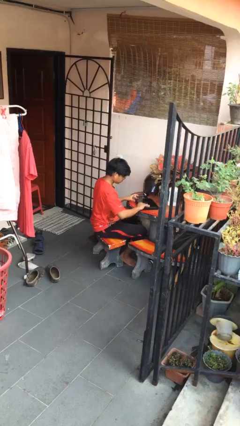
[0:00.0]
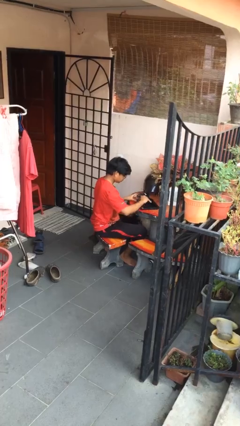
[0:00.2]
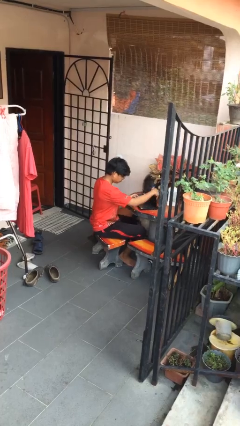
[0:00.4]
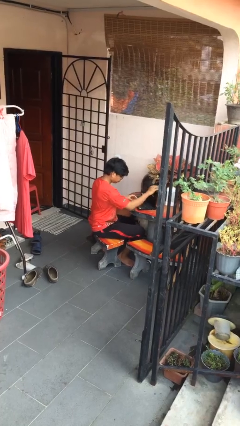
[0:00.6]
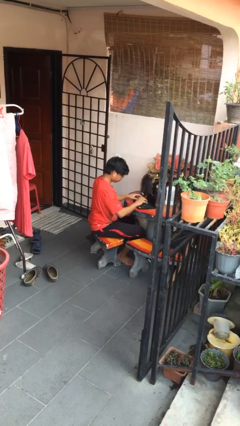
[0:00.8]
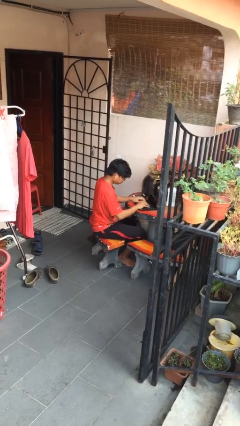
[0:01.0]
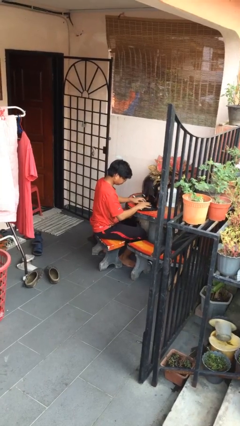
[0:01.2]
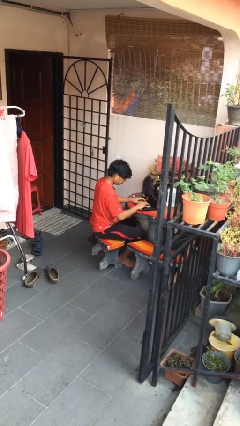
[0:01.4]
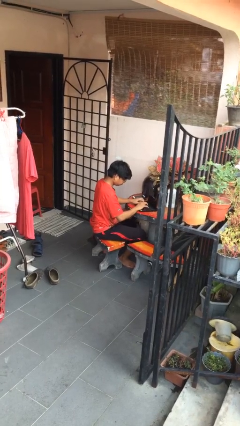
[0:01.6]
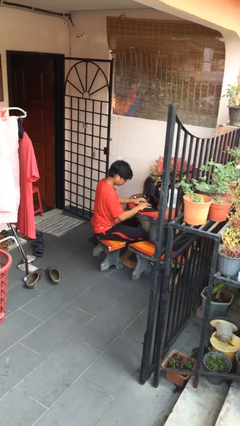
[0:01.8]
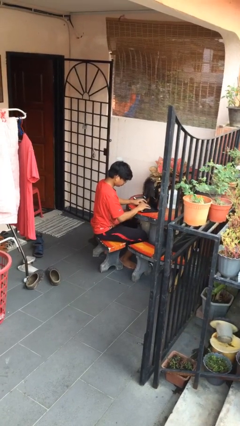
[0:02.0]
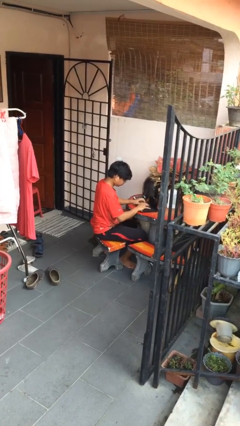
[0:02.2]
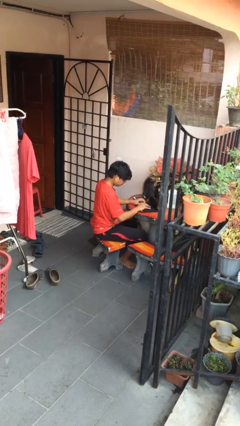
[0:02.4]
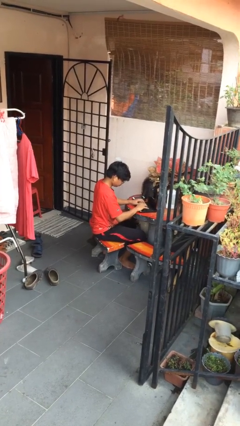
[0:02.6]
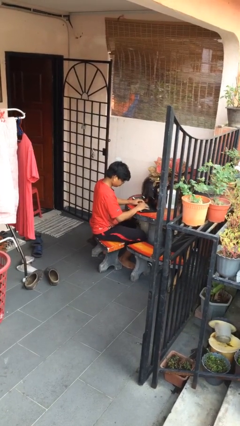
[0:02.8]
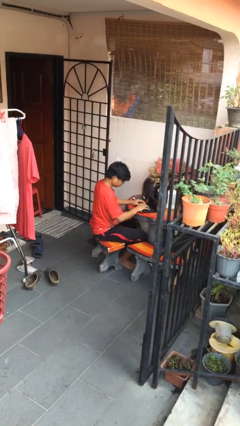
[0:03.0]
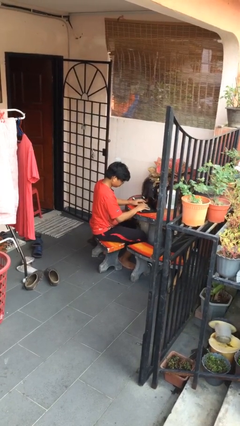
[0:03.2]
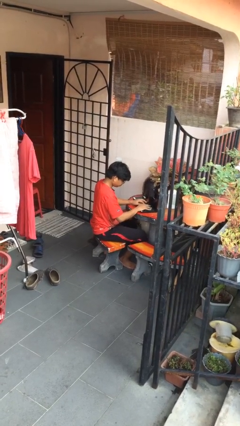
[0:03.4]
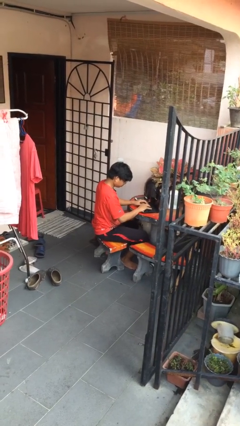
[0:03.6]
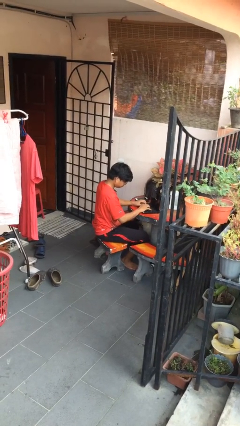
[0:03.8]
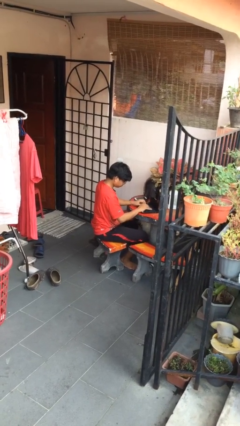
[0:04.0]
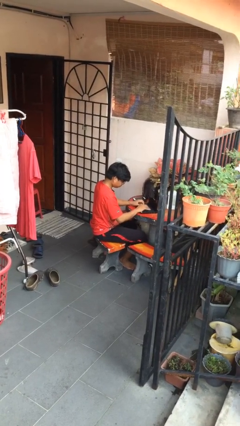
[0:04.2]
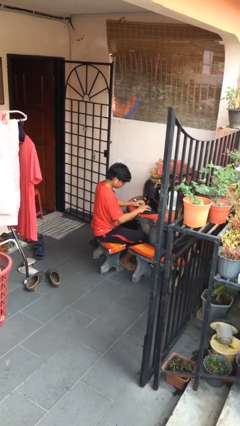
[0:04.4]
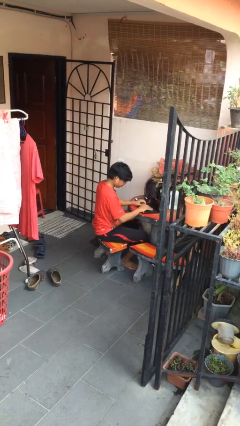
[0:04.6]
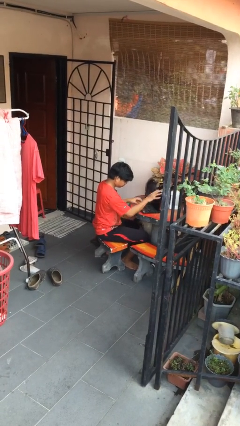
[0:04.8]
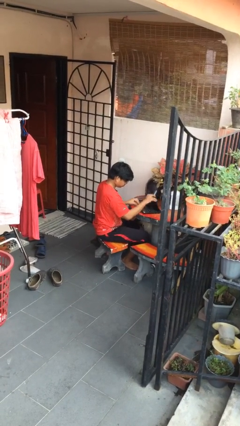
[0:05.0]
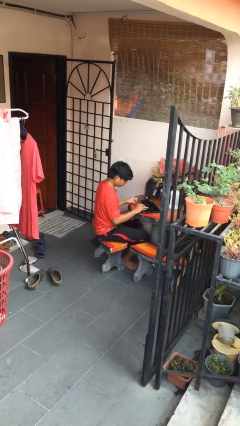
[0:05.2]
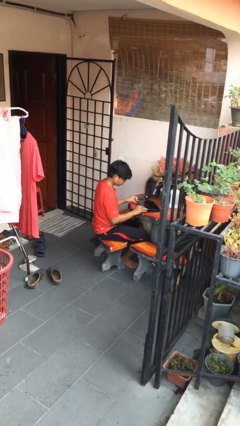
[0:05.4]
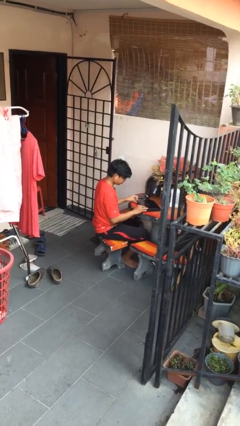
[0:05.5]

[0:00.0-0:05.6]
person interacts with laptop

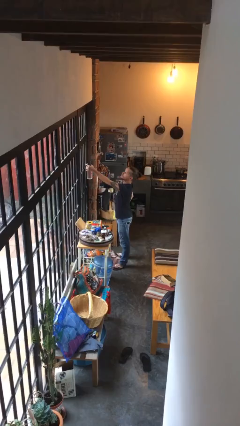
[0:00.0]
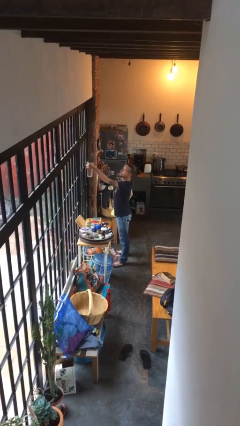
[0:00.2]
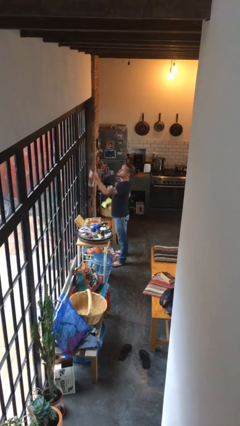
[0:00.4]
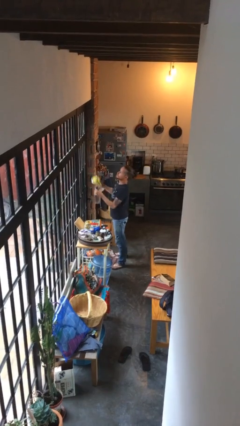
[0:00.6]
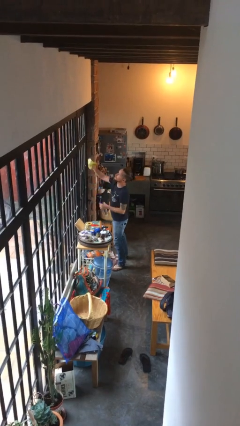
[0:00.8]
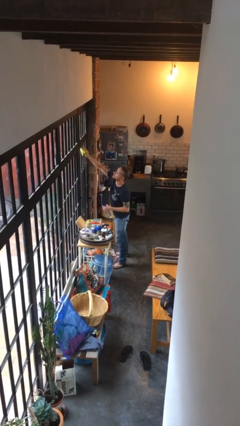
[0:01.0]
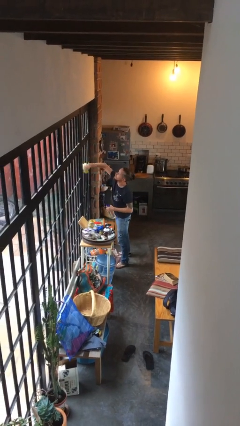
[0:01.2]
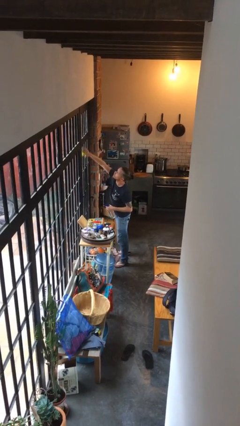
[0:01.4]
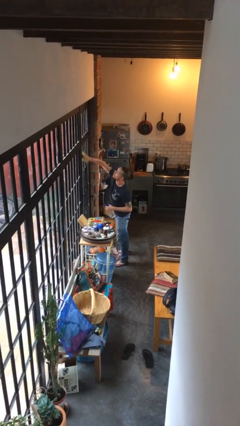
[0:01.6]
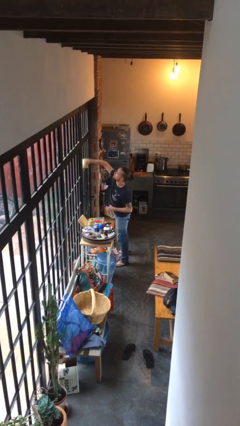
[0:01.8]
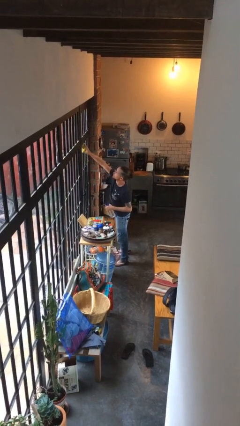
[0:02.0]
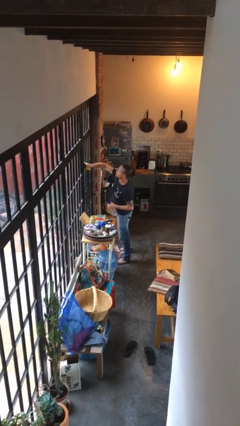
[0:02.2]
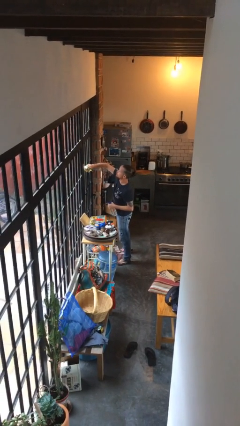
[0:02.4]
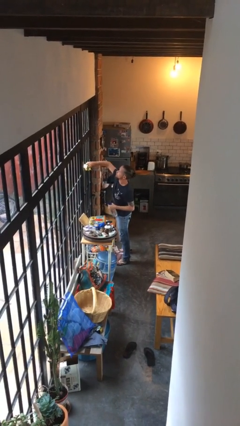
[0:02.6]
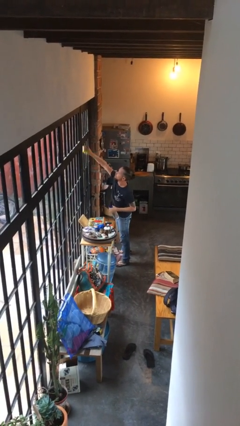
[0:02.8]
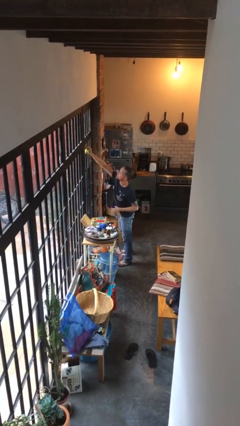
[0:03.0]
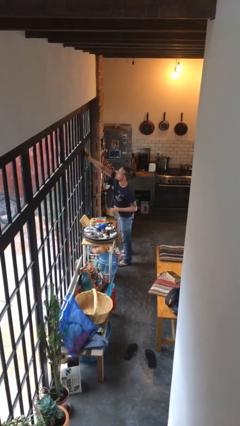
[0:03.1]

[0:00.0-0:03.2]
person washes window

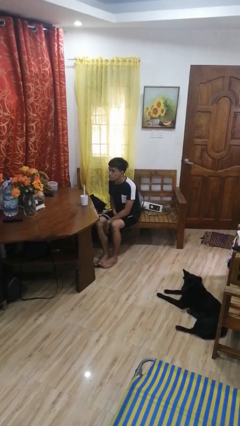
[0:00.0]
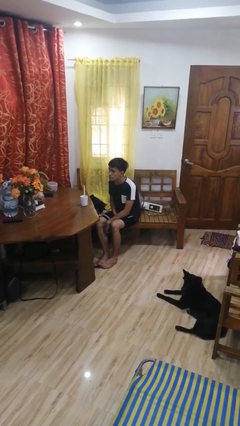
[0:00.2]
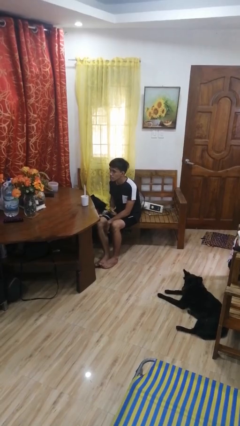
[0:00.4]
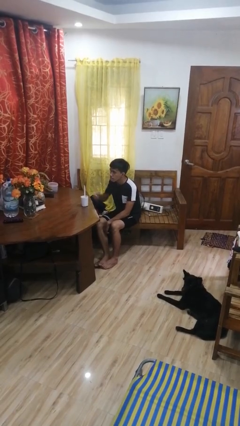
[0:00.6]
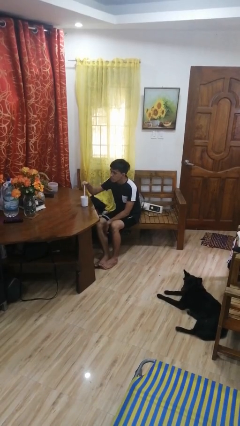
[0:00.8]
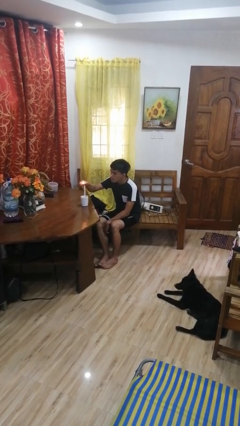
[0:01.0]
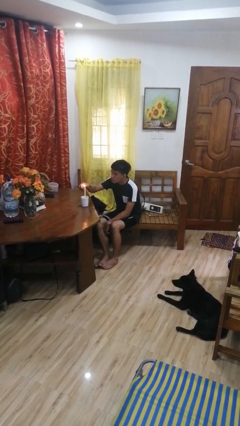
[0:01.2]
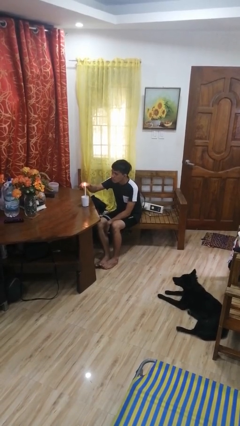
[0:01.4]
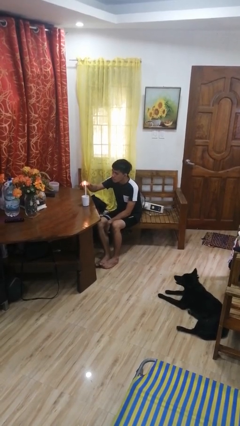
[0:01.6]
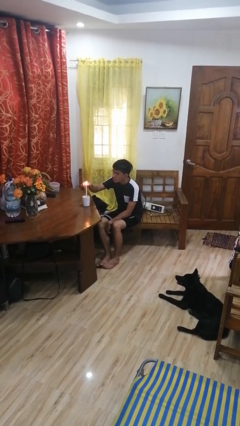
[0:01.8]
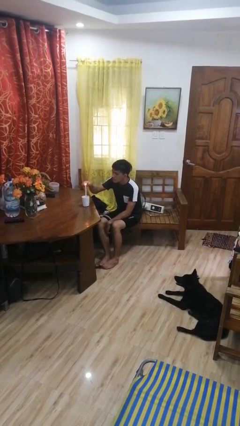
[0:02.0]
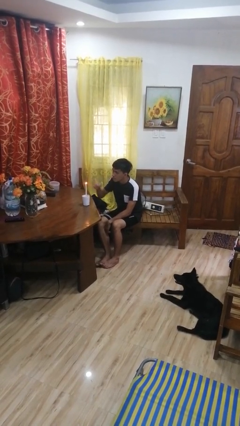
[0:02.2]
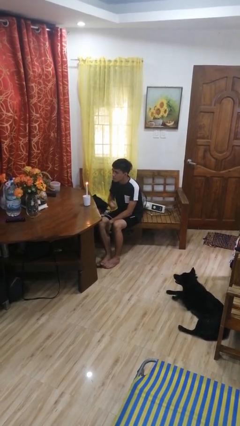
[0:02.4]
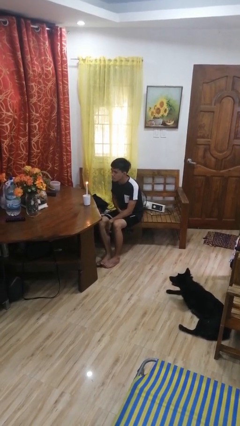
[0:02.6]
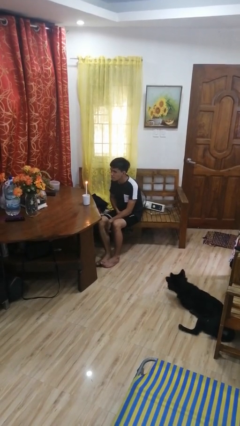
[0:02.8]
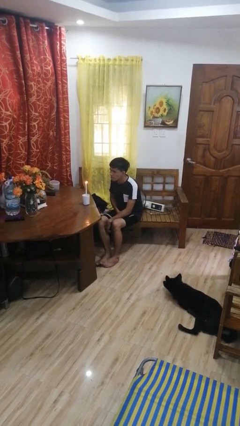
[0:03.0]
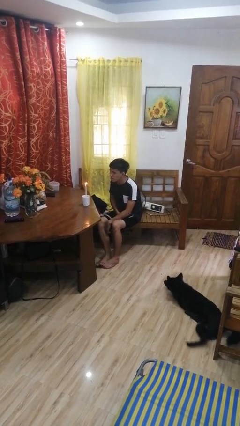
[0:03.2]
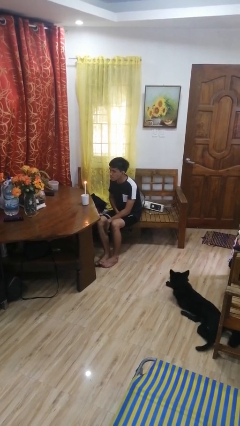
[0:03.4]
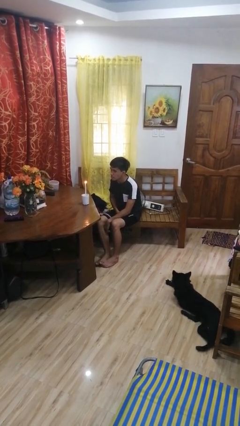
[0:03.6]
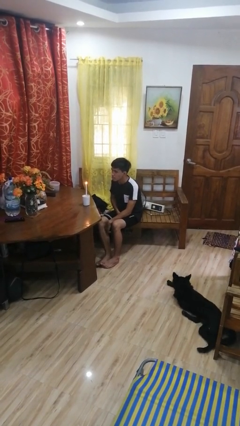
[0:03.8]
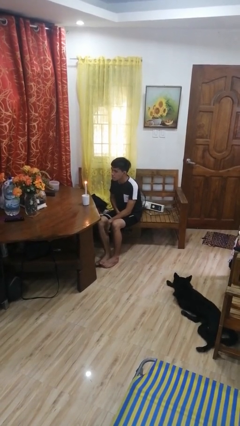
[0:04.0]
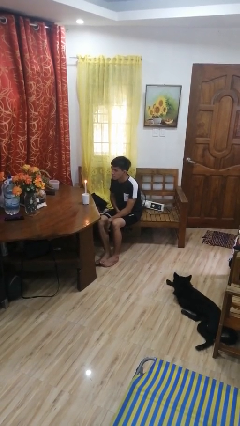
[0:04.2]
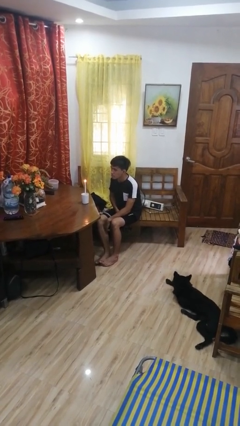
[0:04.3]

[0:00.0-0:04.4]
person lights candle

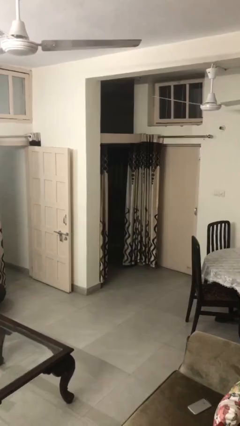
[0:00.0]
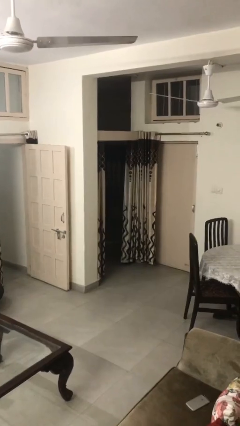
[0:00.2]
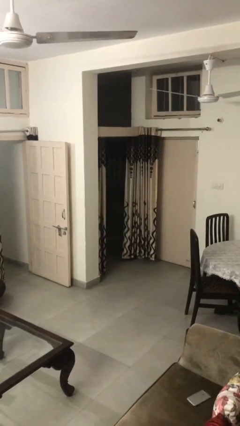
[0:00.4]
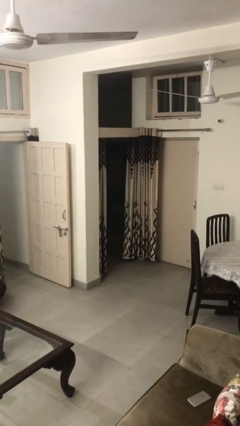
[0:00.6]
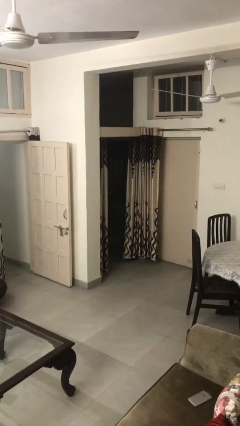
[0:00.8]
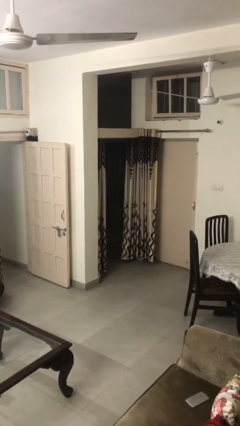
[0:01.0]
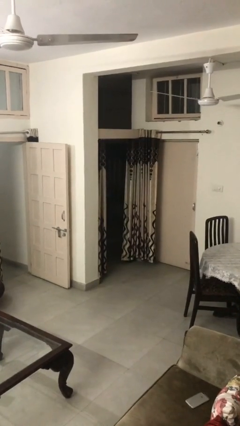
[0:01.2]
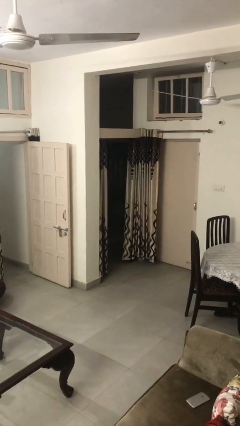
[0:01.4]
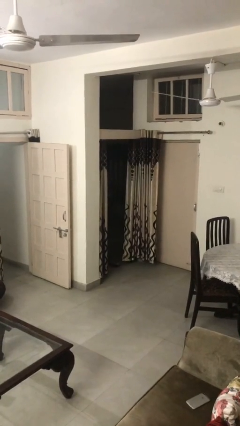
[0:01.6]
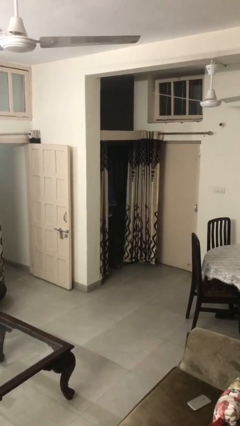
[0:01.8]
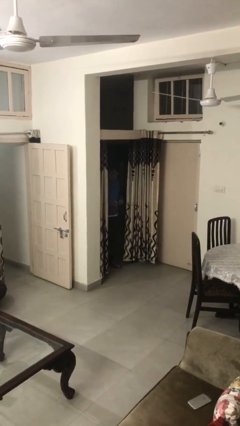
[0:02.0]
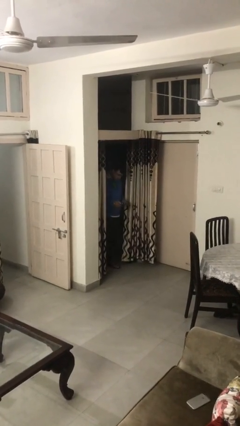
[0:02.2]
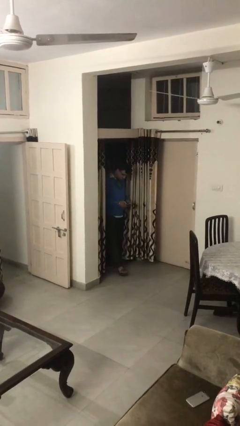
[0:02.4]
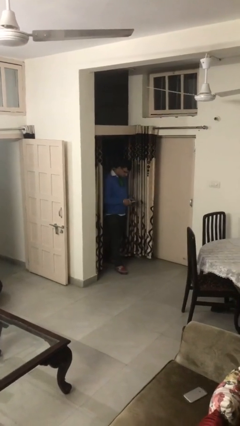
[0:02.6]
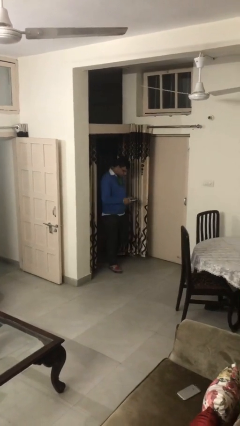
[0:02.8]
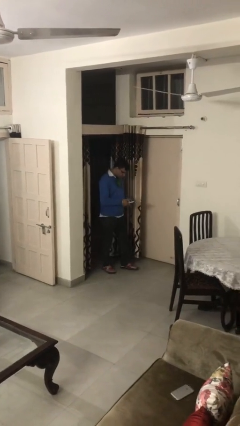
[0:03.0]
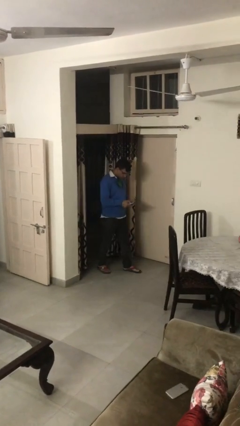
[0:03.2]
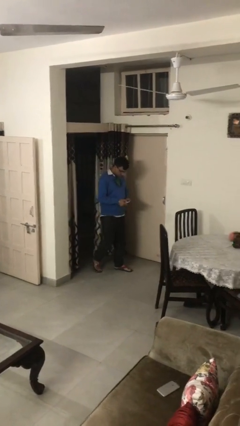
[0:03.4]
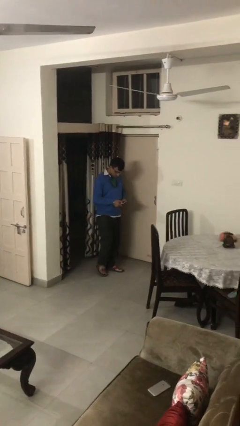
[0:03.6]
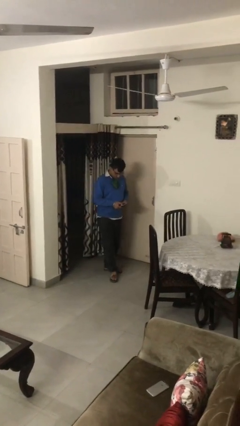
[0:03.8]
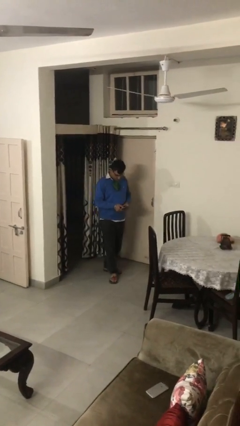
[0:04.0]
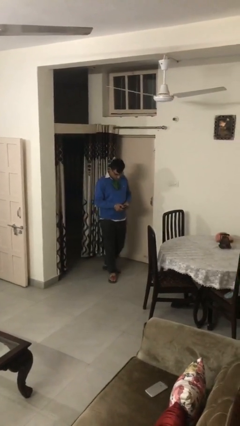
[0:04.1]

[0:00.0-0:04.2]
person enters scene through structure

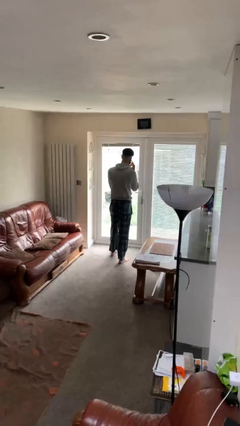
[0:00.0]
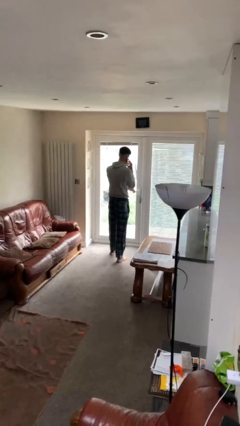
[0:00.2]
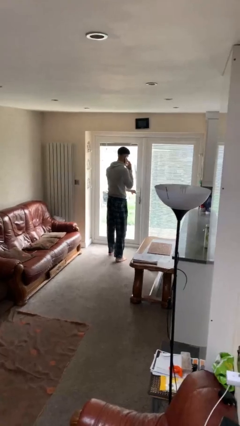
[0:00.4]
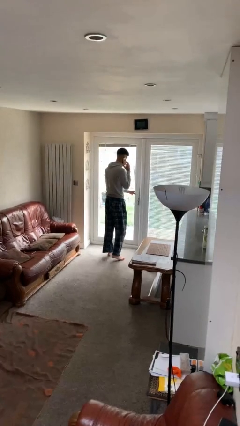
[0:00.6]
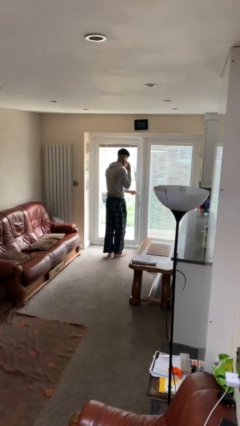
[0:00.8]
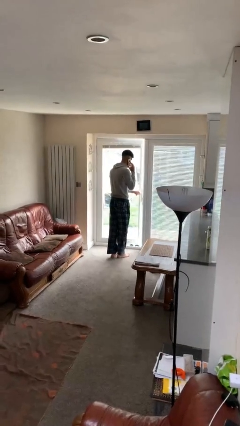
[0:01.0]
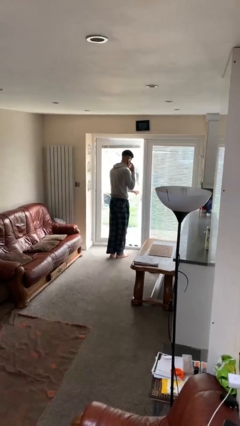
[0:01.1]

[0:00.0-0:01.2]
person opens facility door
